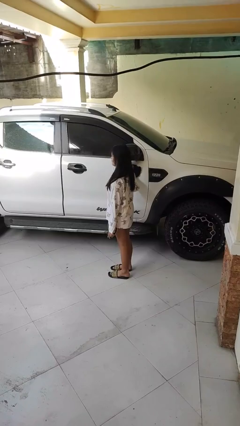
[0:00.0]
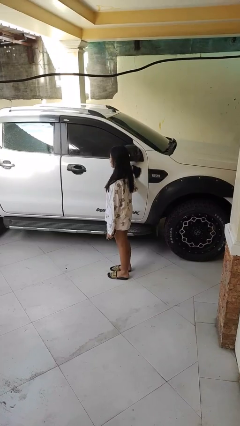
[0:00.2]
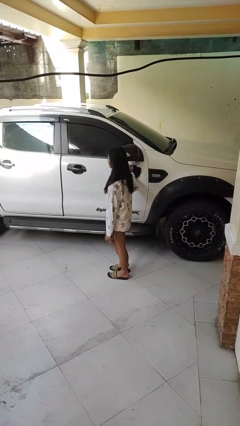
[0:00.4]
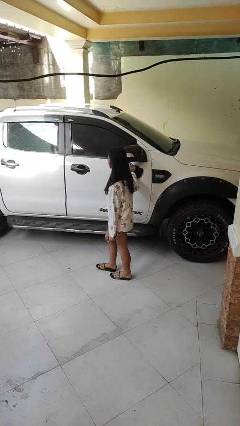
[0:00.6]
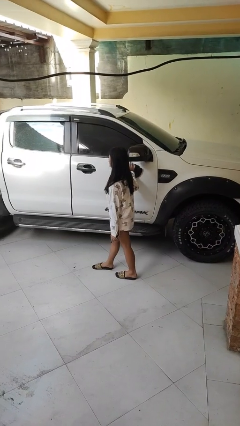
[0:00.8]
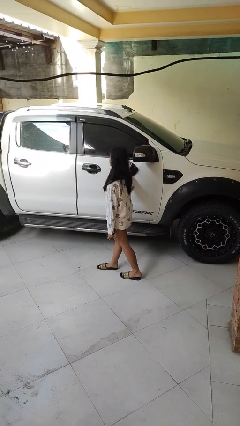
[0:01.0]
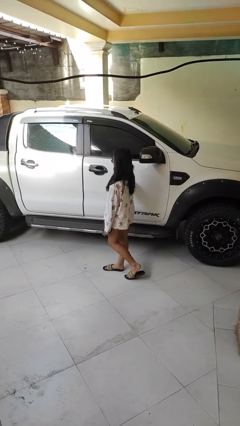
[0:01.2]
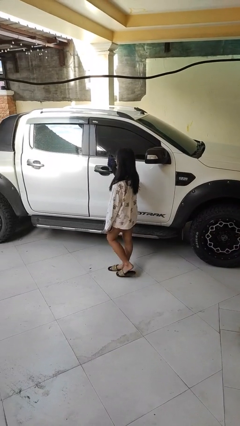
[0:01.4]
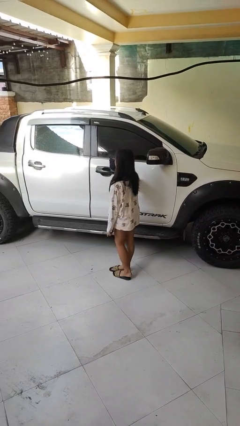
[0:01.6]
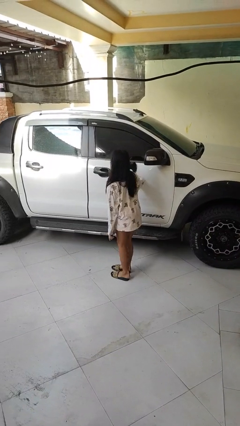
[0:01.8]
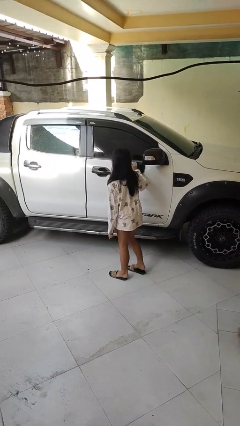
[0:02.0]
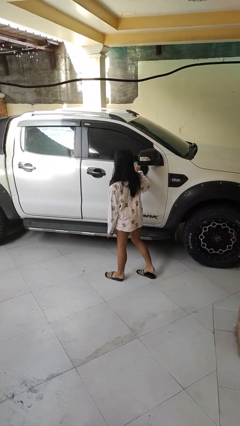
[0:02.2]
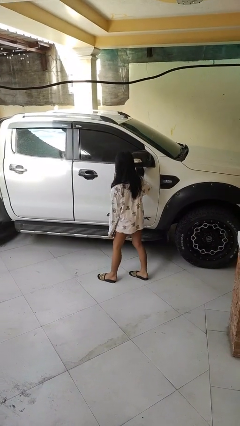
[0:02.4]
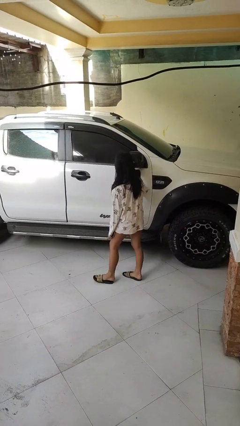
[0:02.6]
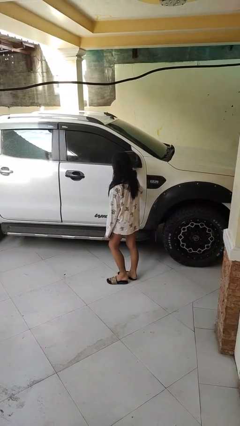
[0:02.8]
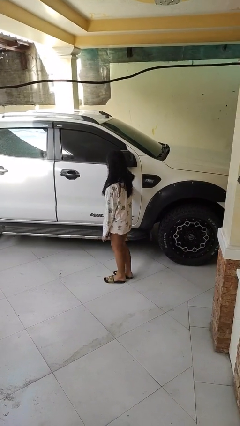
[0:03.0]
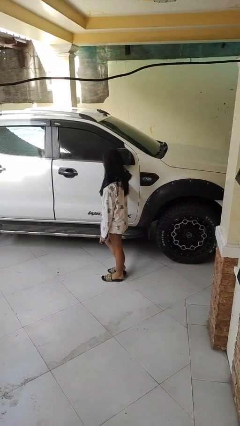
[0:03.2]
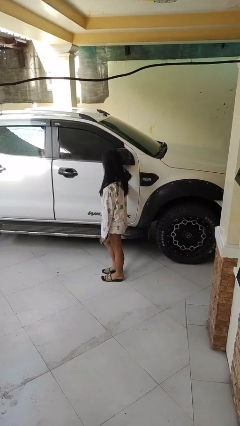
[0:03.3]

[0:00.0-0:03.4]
person polishes car with rag

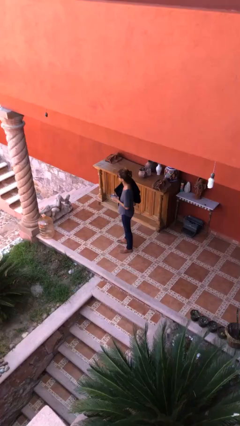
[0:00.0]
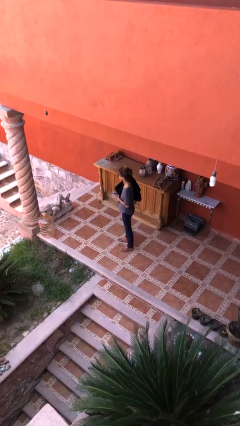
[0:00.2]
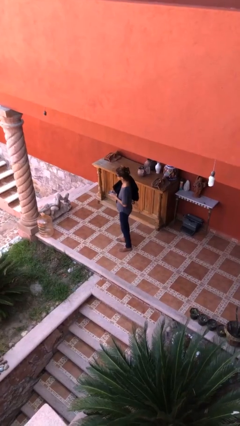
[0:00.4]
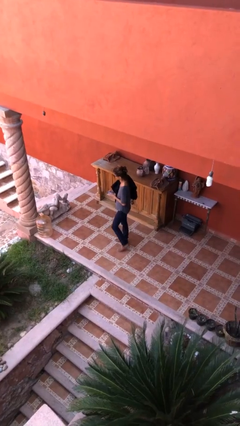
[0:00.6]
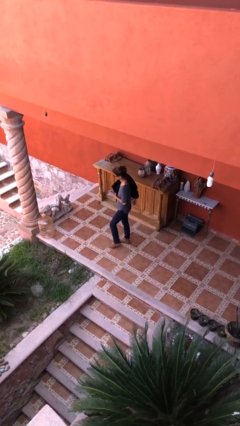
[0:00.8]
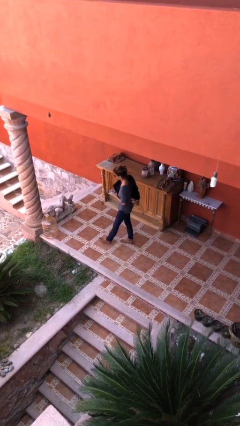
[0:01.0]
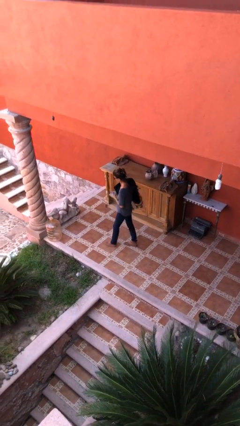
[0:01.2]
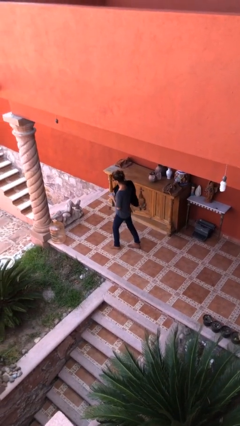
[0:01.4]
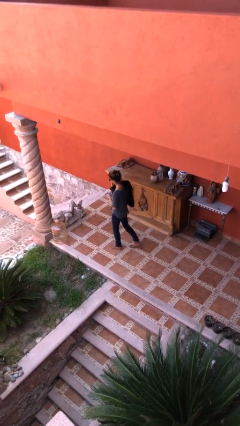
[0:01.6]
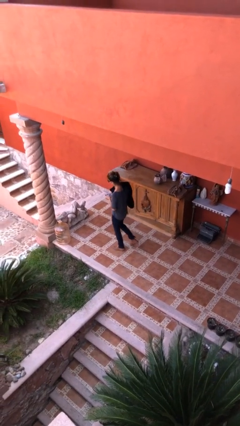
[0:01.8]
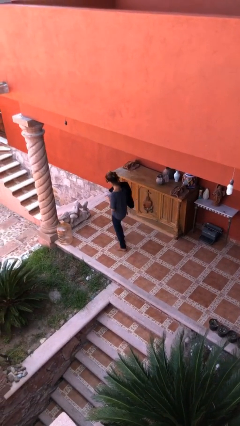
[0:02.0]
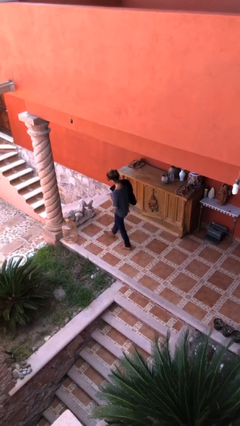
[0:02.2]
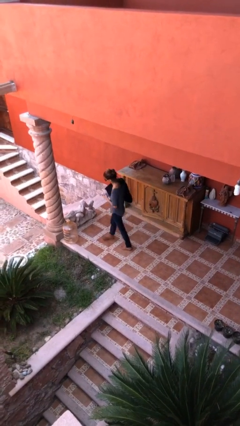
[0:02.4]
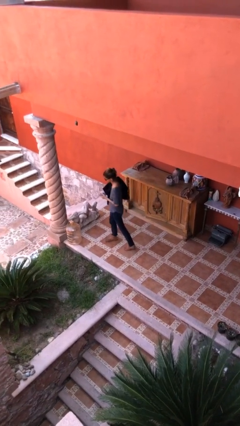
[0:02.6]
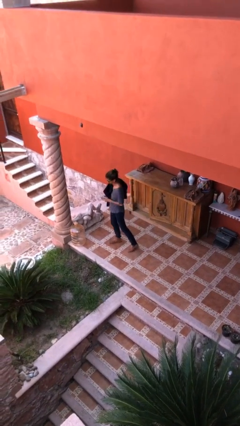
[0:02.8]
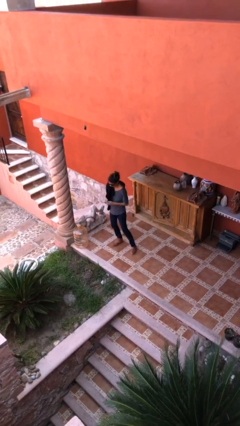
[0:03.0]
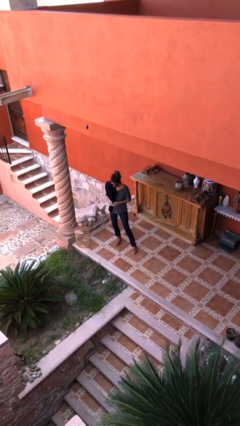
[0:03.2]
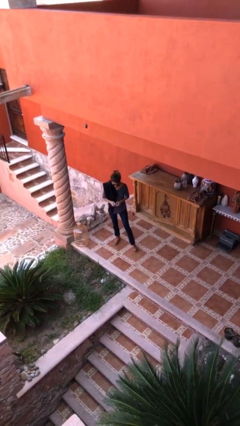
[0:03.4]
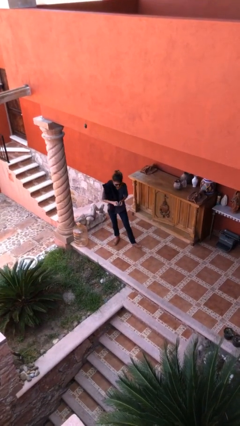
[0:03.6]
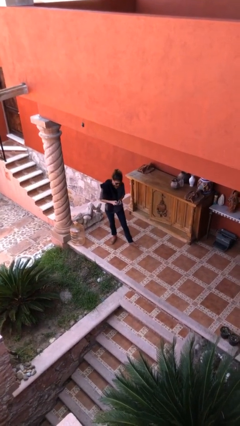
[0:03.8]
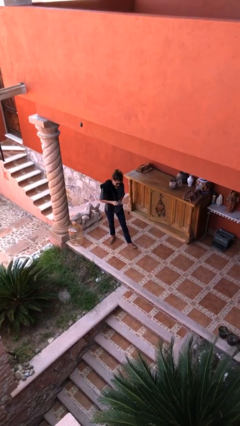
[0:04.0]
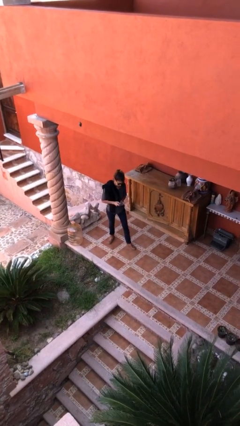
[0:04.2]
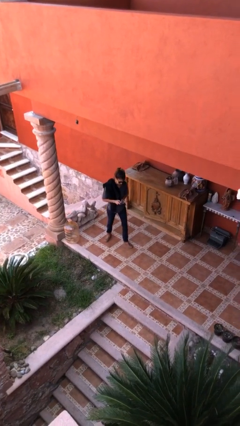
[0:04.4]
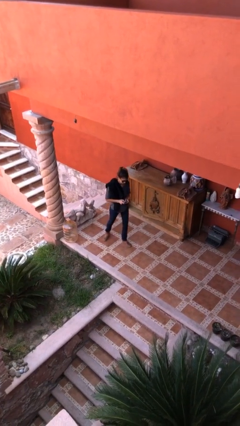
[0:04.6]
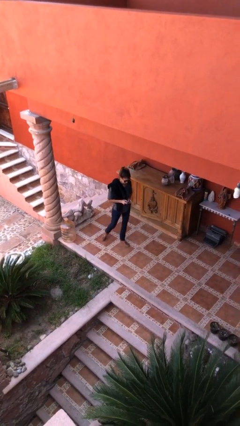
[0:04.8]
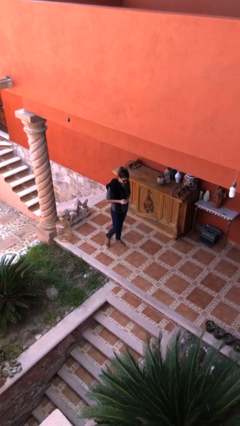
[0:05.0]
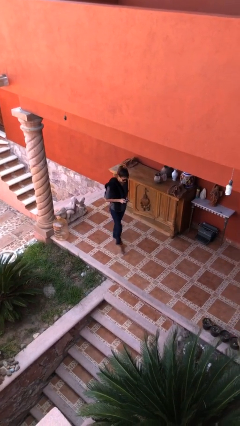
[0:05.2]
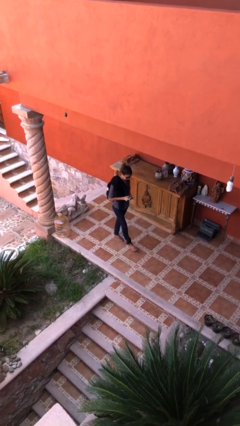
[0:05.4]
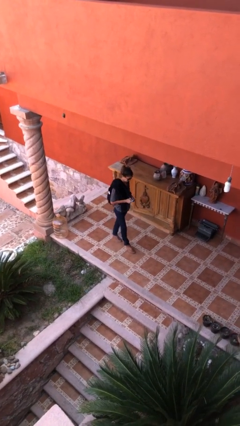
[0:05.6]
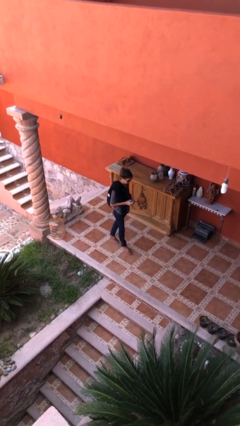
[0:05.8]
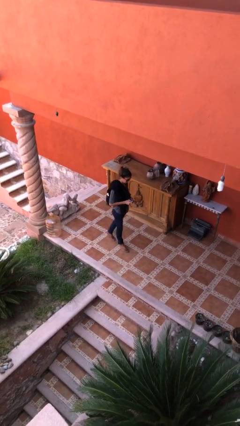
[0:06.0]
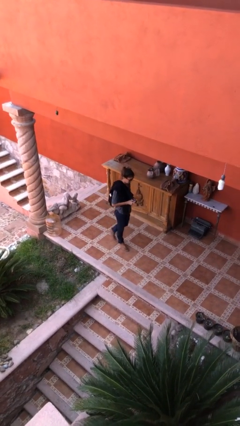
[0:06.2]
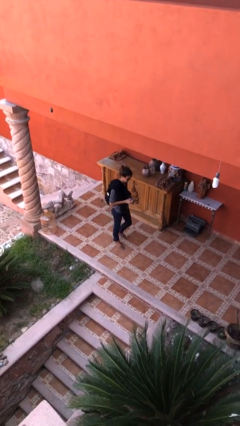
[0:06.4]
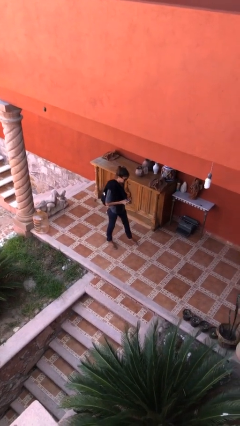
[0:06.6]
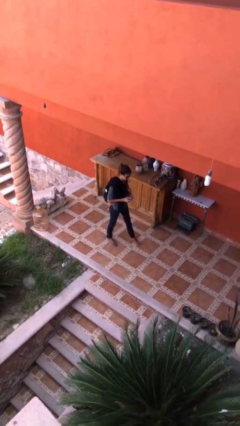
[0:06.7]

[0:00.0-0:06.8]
person texts on phone

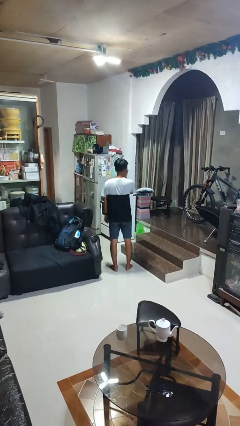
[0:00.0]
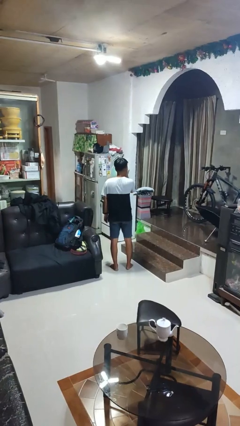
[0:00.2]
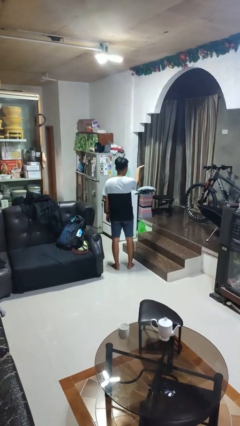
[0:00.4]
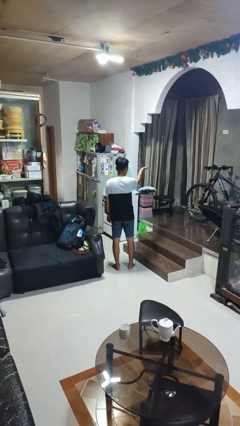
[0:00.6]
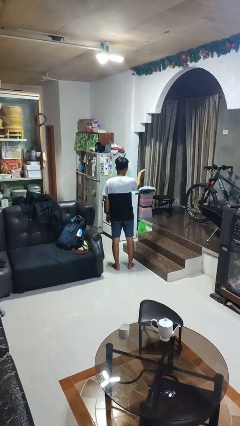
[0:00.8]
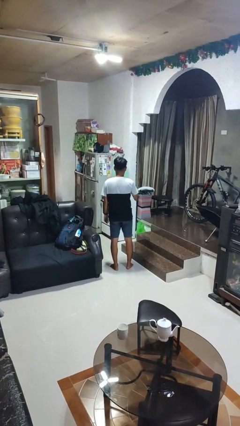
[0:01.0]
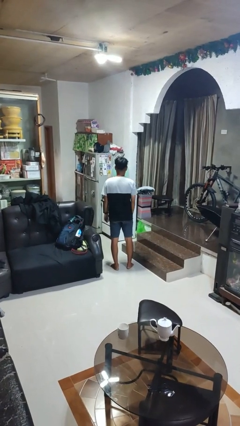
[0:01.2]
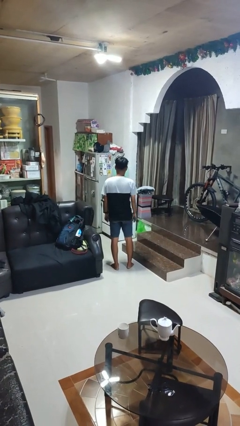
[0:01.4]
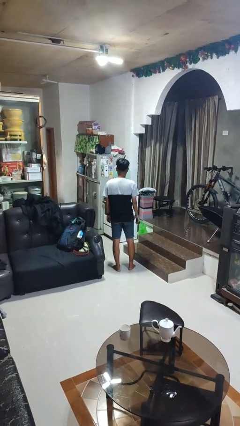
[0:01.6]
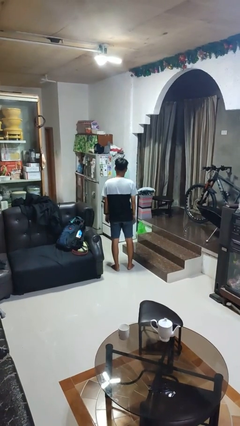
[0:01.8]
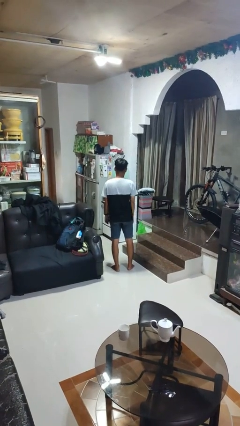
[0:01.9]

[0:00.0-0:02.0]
person gestures blow kiss

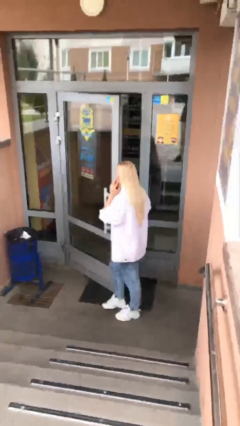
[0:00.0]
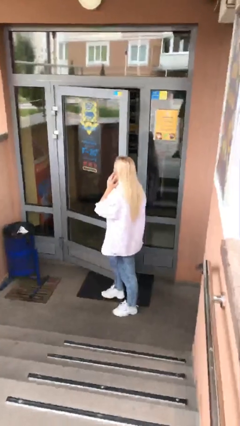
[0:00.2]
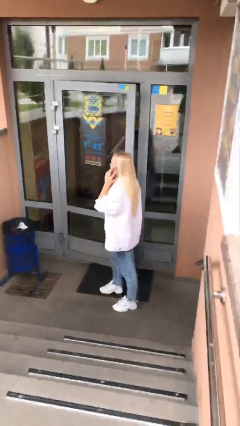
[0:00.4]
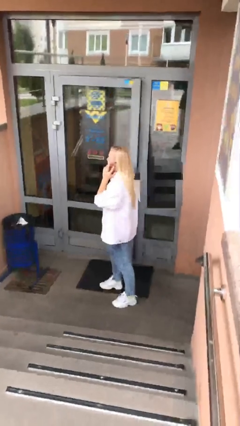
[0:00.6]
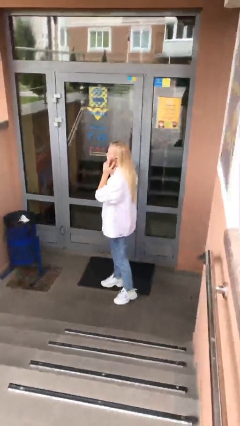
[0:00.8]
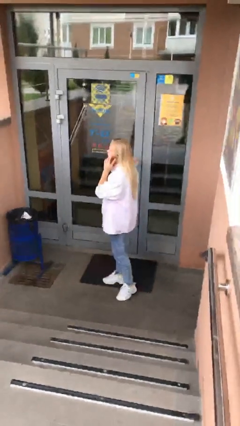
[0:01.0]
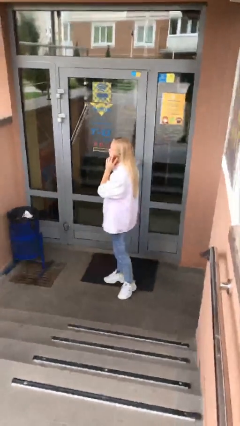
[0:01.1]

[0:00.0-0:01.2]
person closes facility door

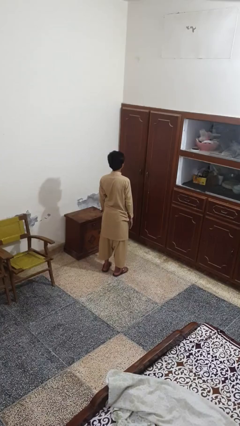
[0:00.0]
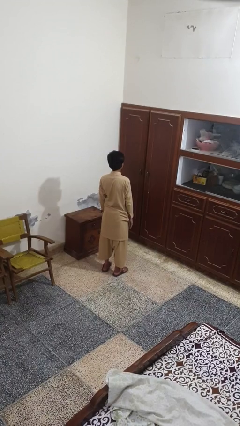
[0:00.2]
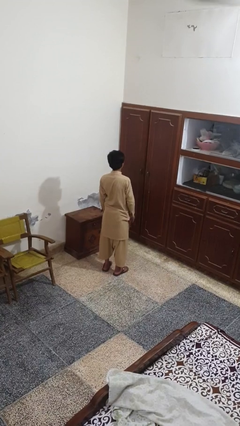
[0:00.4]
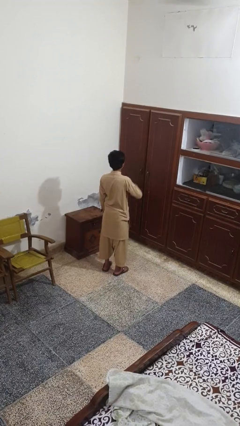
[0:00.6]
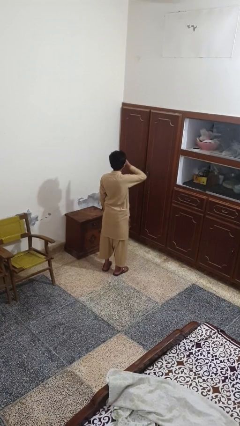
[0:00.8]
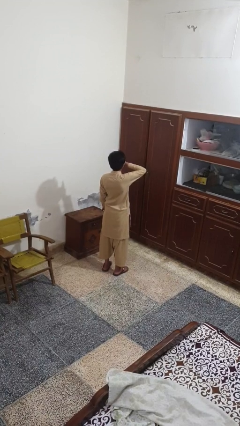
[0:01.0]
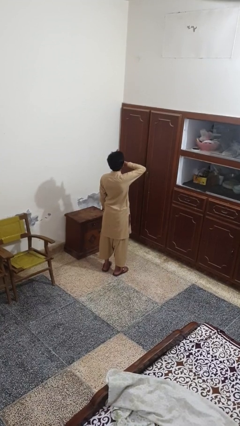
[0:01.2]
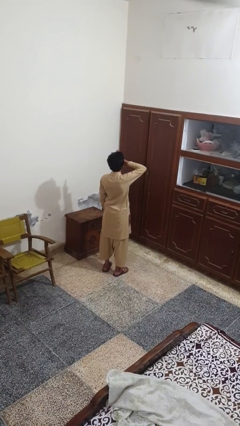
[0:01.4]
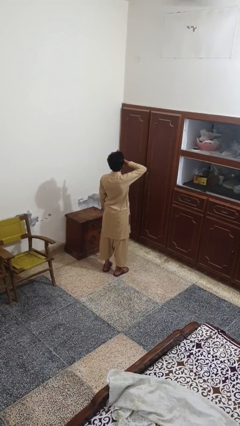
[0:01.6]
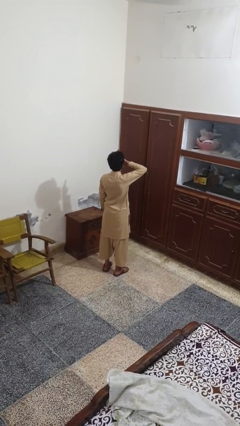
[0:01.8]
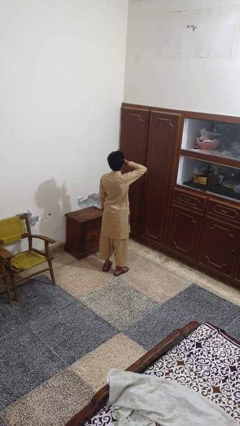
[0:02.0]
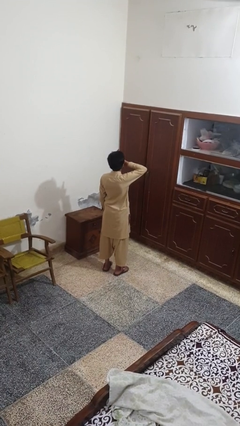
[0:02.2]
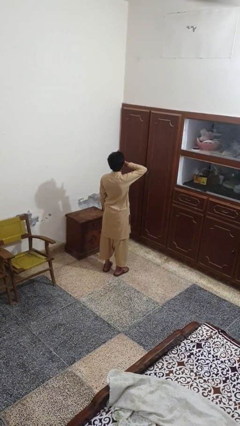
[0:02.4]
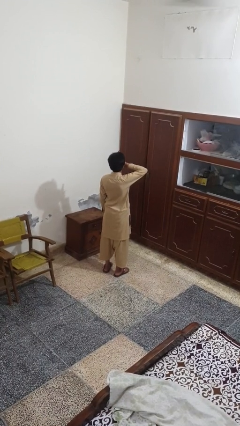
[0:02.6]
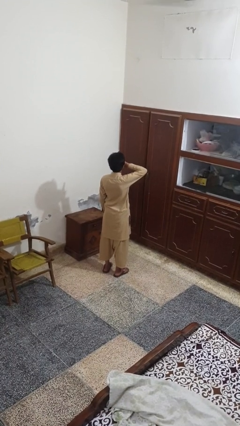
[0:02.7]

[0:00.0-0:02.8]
person yawns

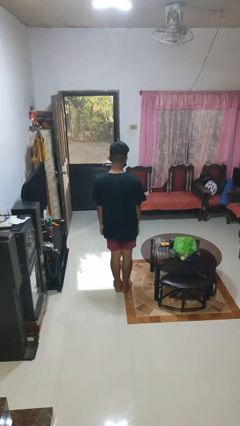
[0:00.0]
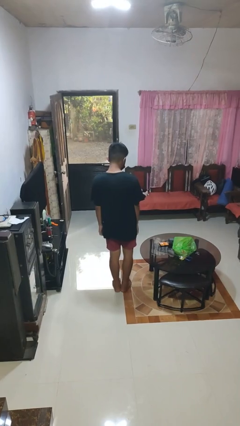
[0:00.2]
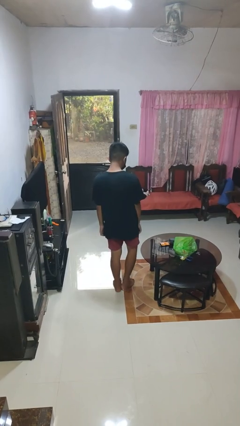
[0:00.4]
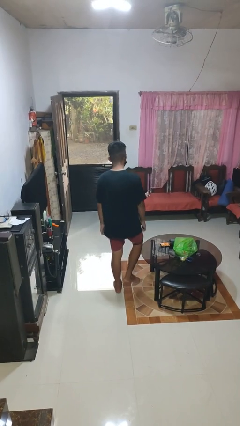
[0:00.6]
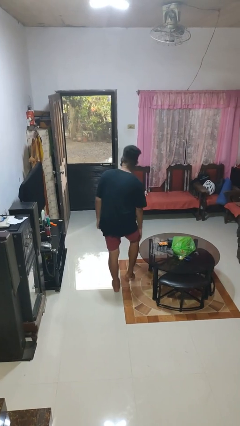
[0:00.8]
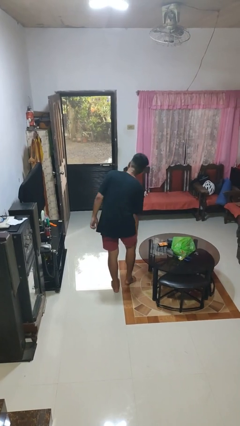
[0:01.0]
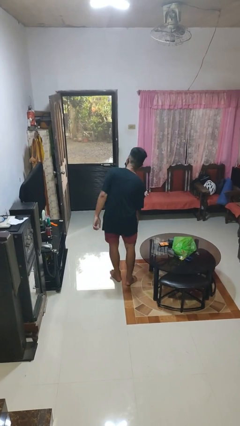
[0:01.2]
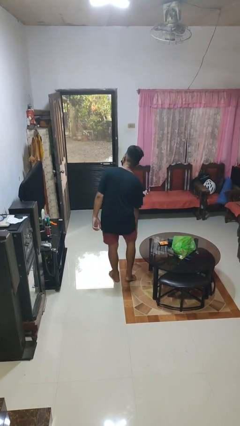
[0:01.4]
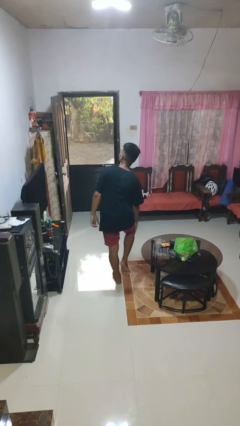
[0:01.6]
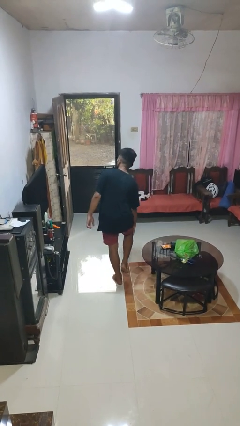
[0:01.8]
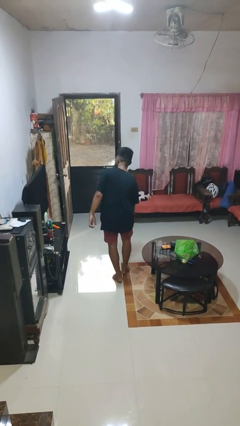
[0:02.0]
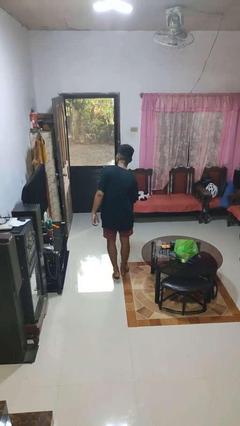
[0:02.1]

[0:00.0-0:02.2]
person bumps into table
